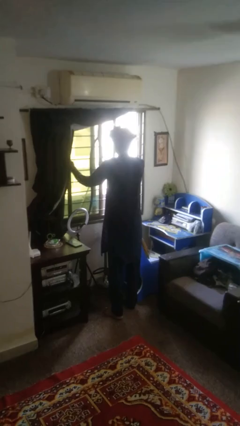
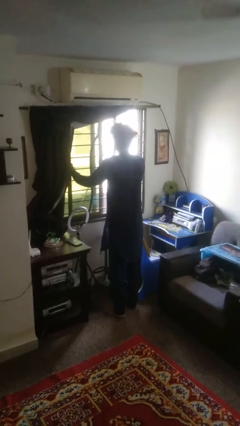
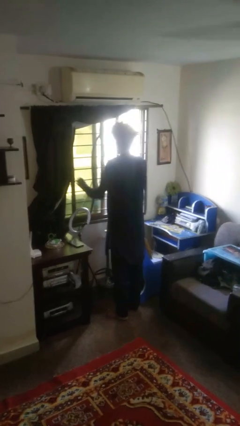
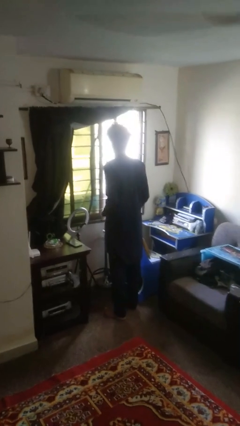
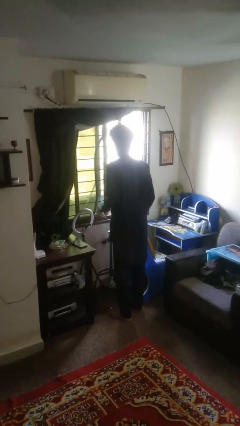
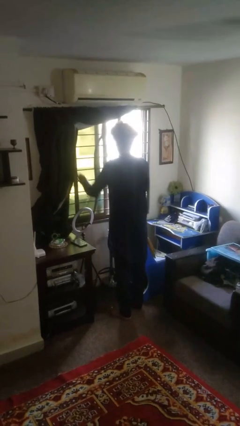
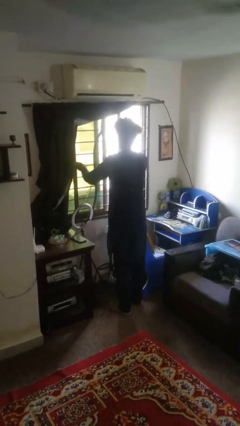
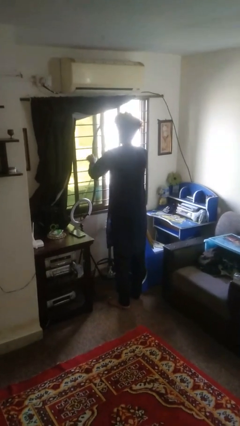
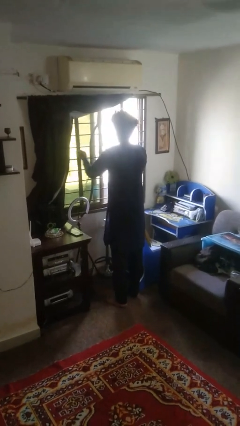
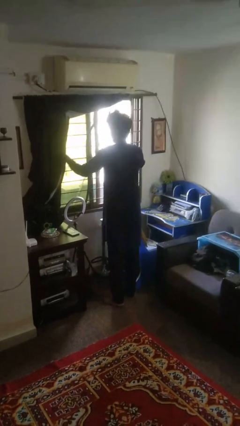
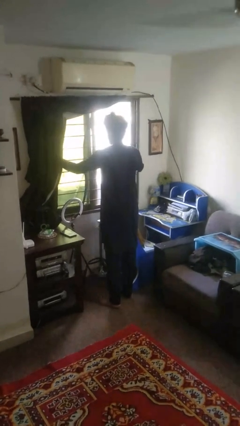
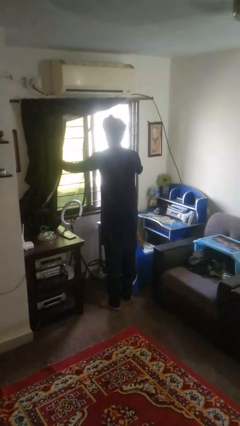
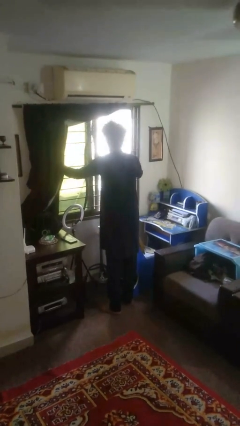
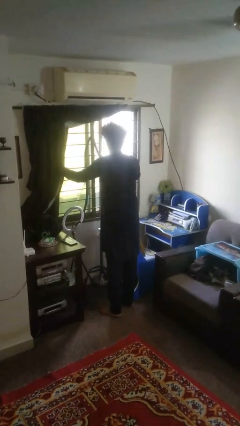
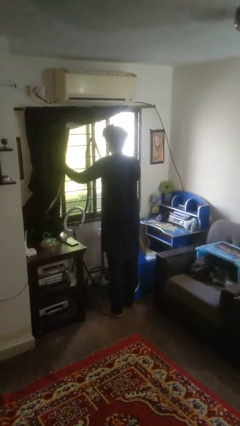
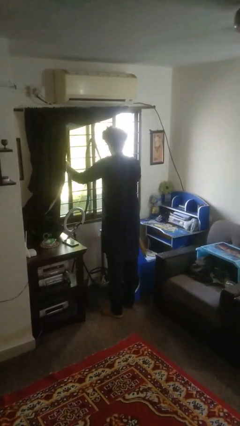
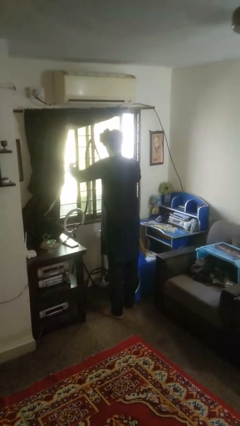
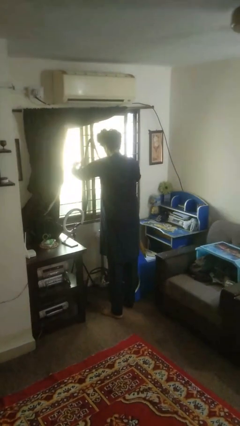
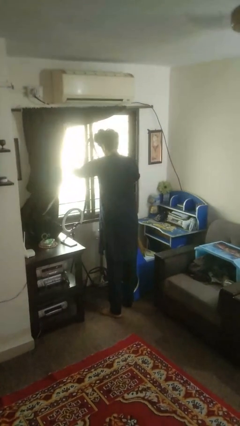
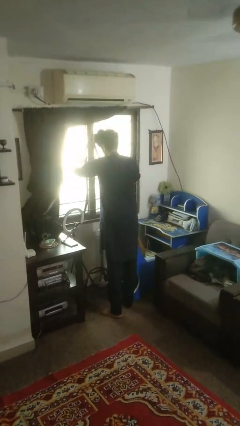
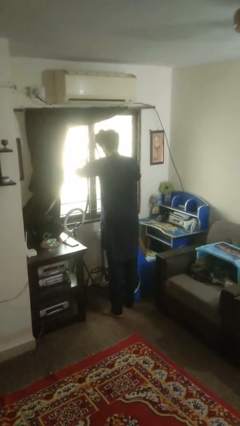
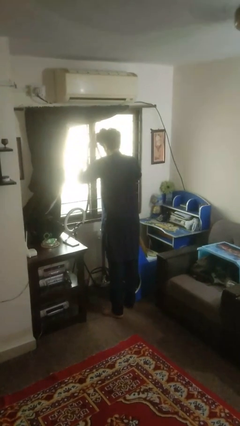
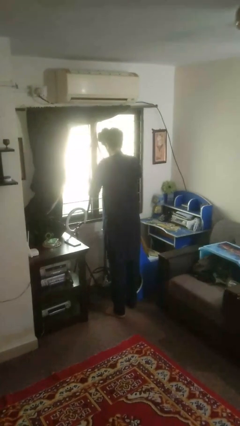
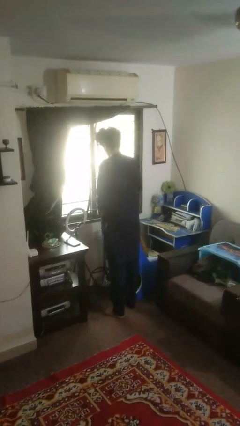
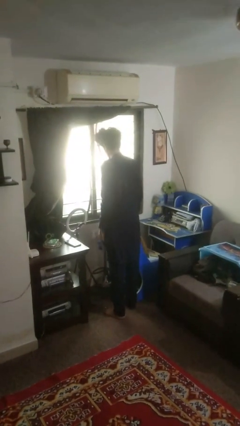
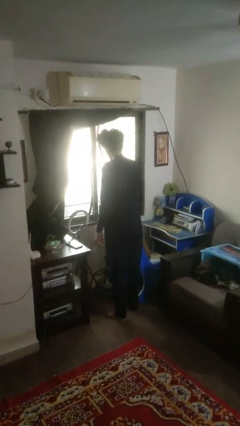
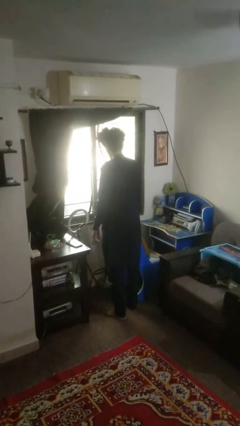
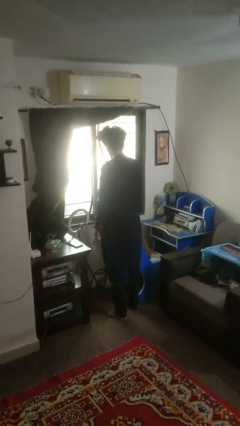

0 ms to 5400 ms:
person closes home window

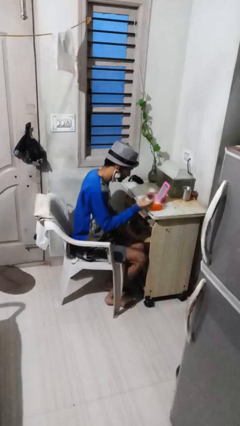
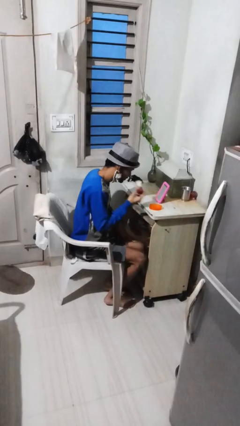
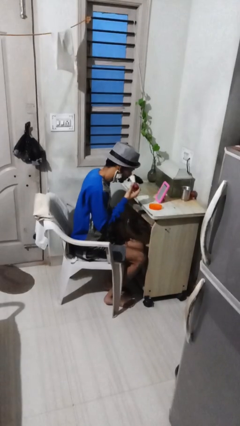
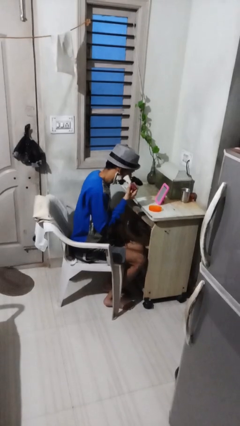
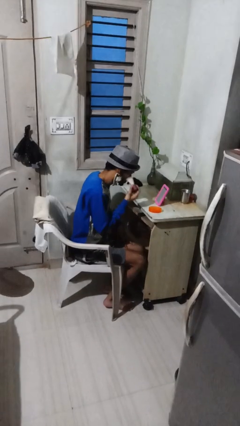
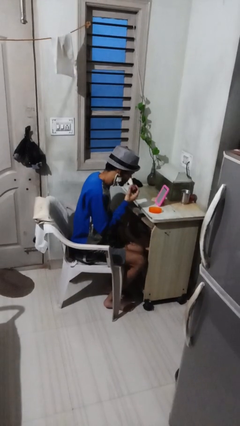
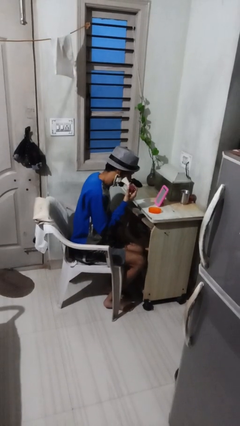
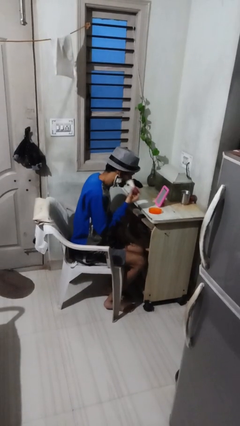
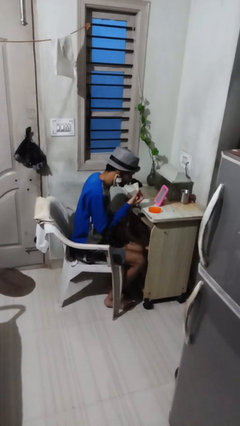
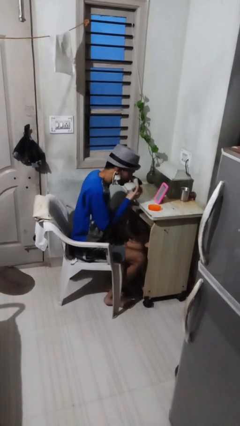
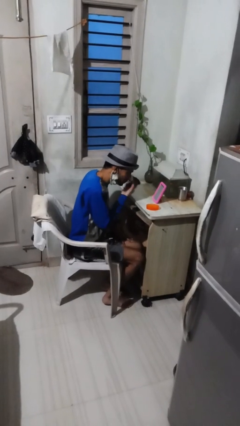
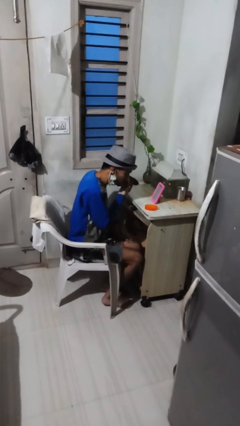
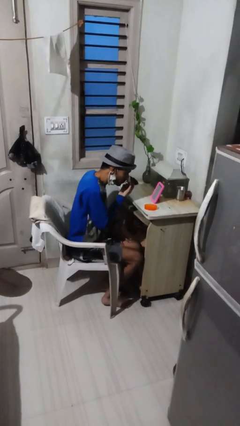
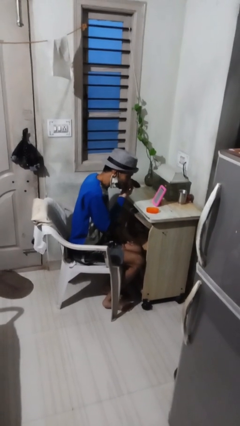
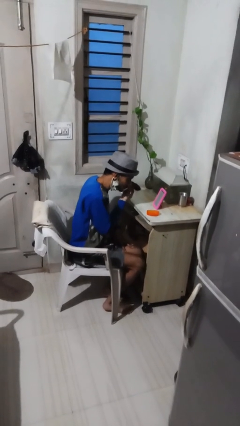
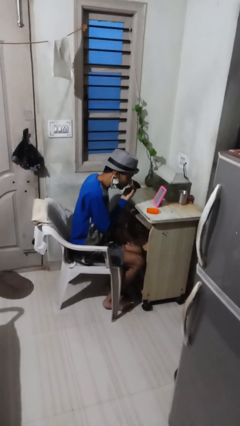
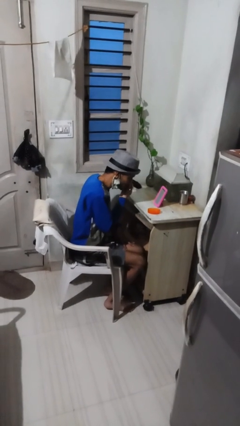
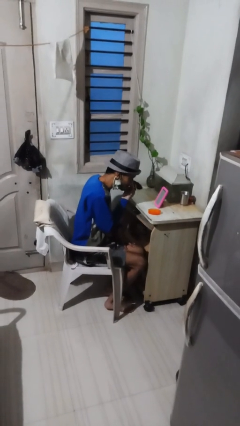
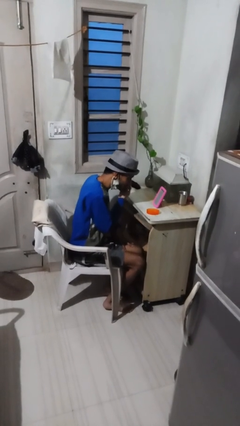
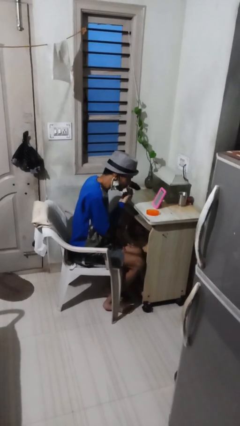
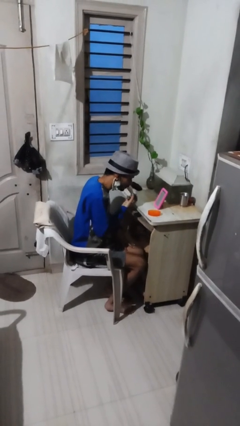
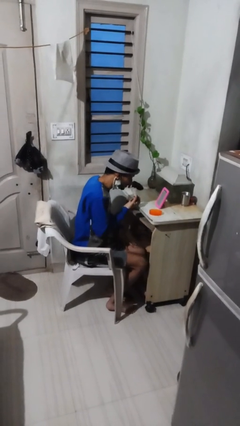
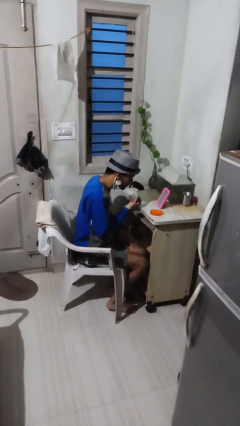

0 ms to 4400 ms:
person applies foundation makeup

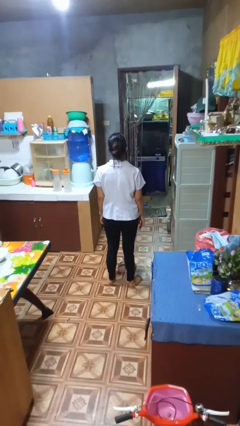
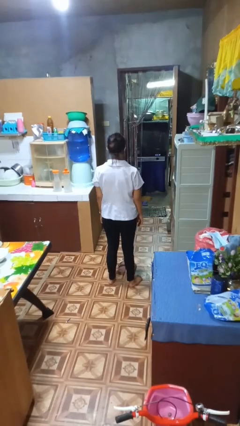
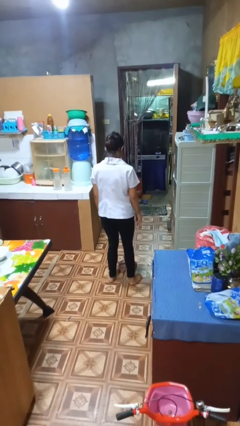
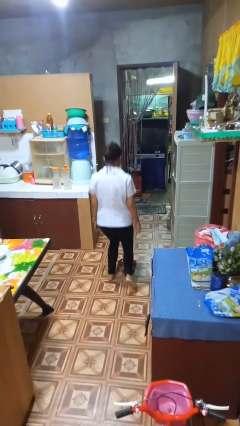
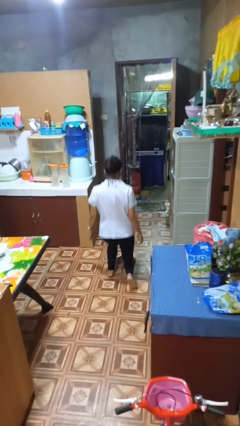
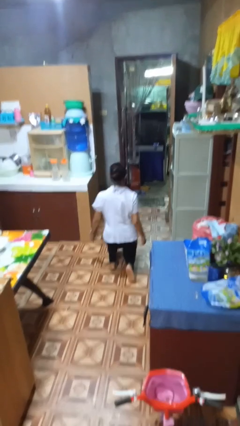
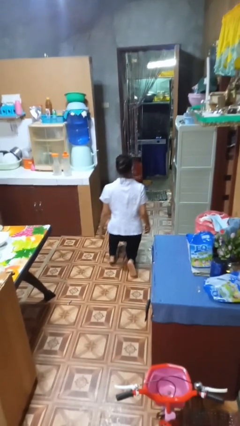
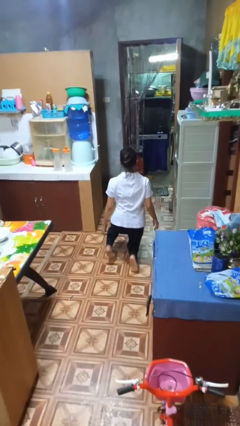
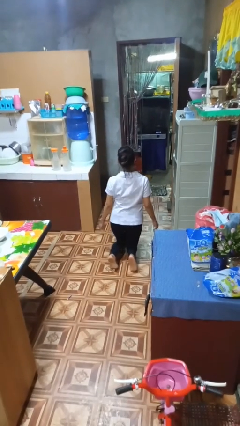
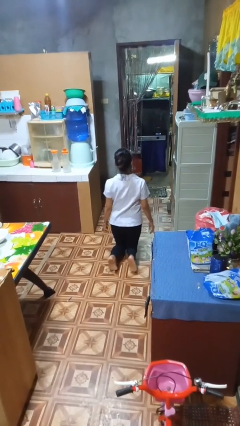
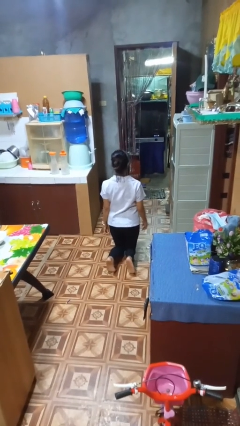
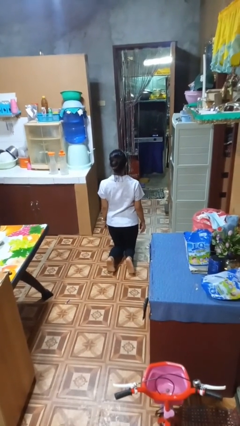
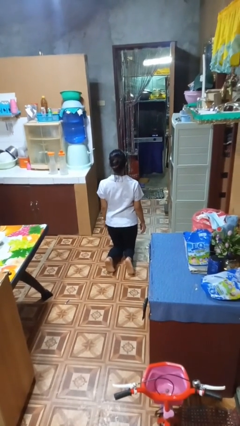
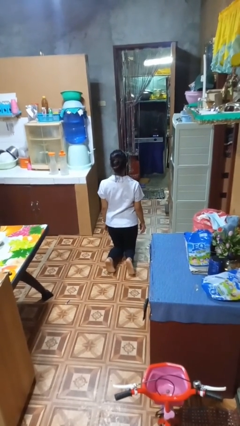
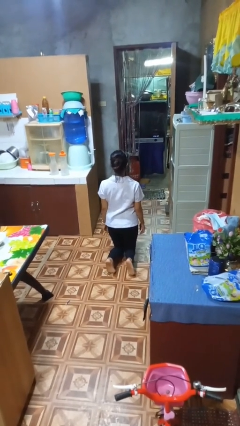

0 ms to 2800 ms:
person kneels

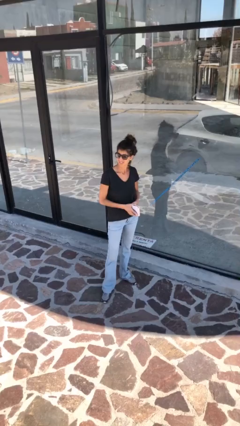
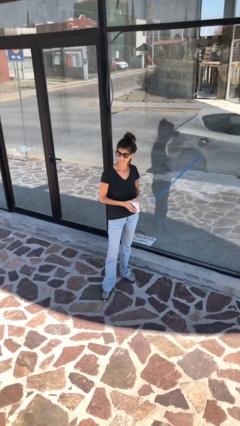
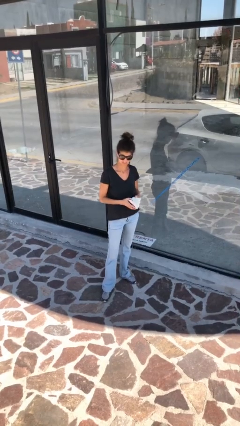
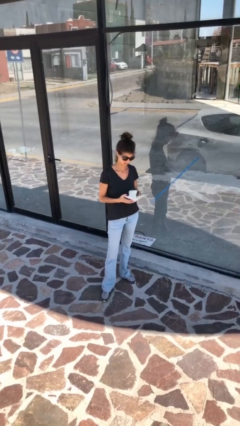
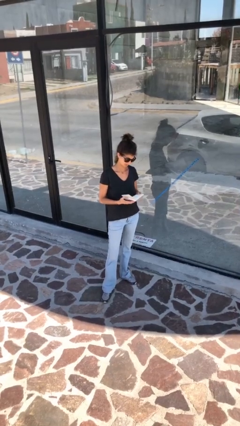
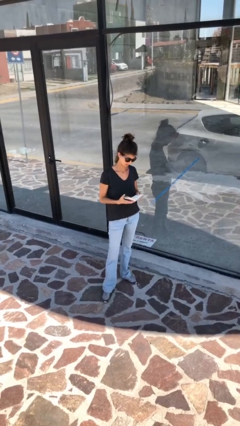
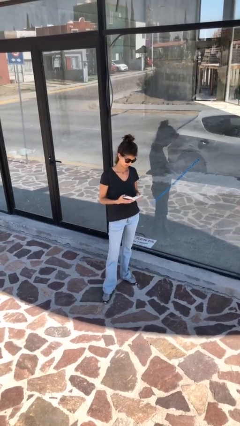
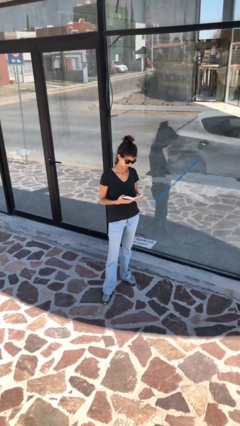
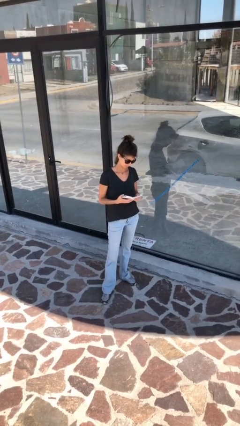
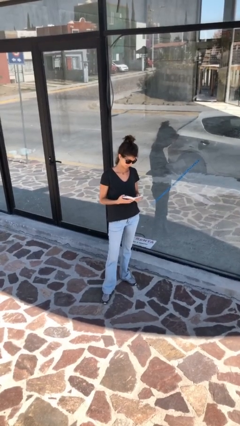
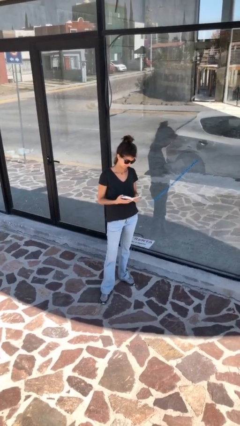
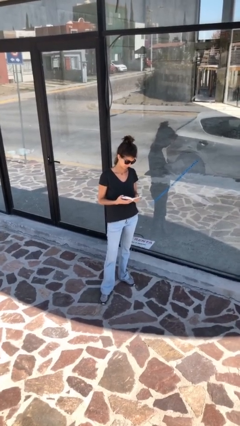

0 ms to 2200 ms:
person reads document

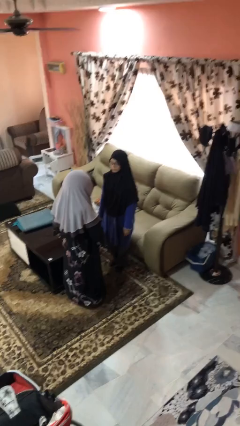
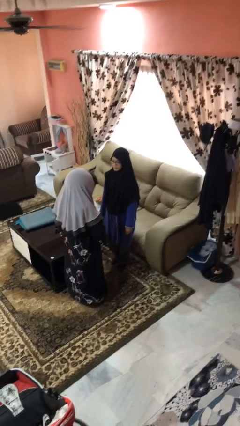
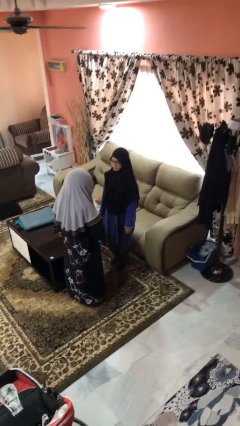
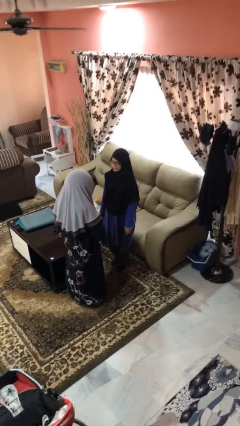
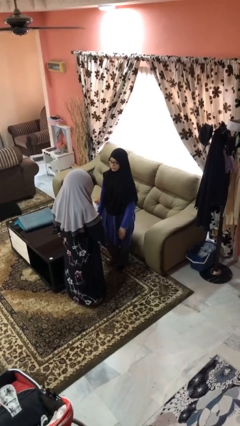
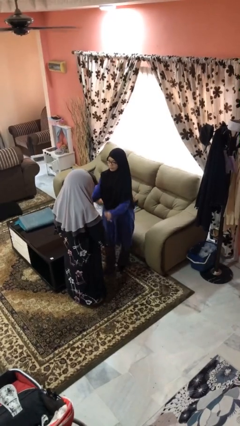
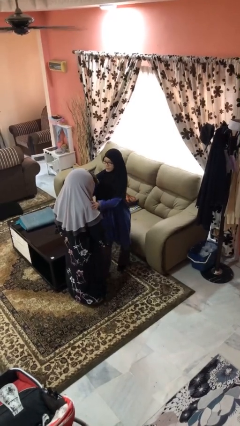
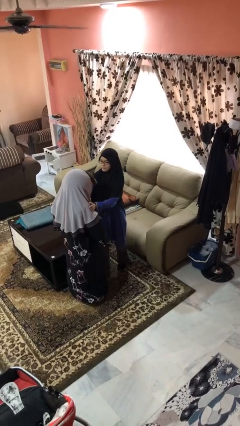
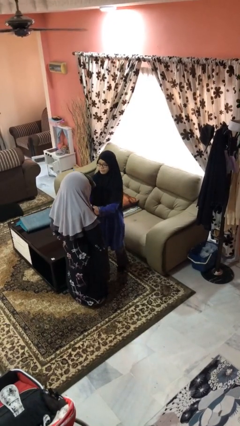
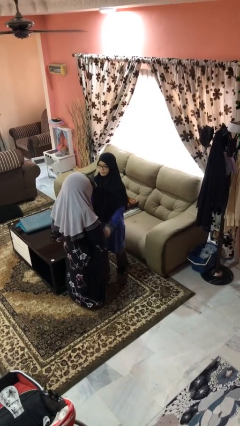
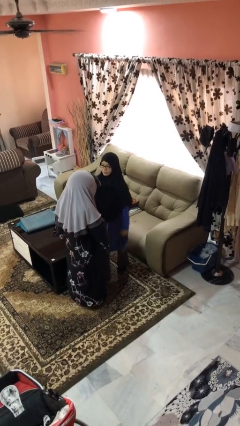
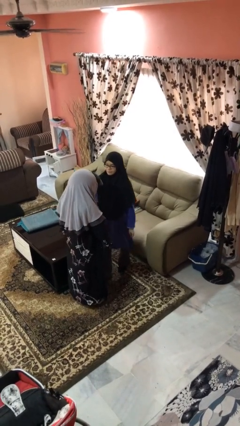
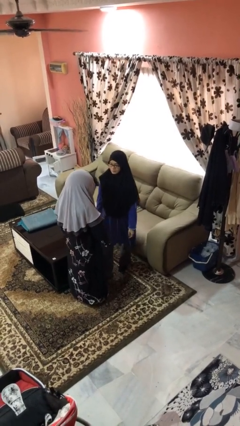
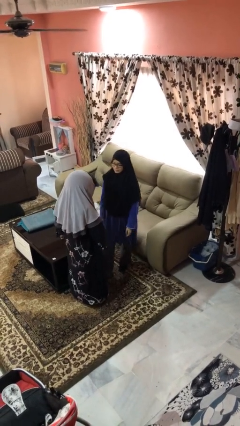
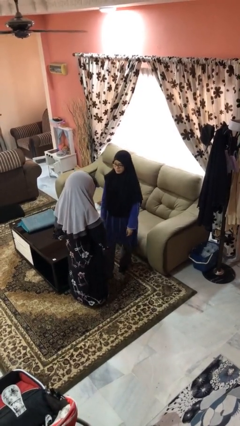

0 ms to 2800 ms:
person shoves person
